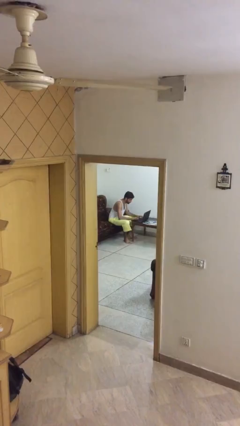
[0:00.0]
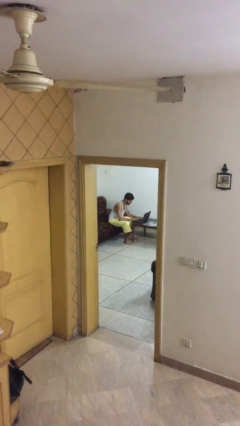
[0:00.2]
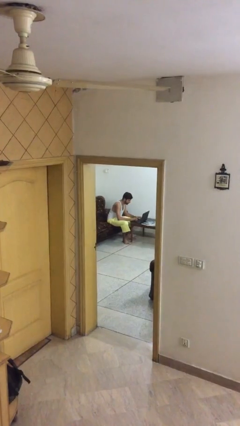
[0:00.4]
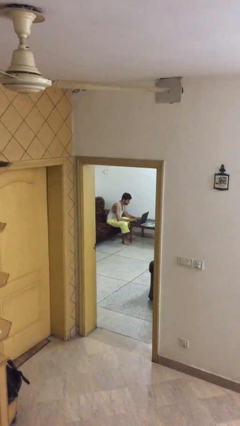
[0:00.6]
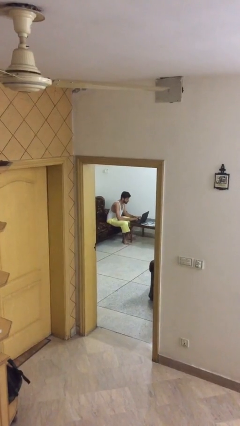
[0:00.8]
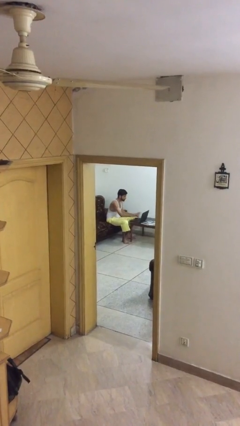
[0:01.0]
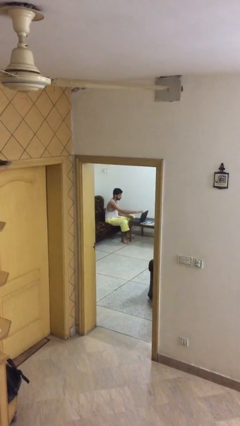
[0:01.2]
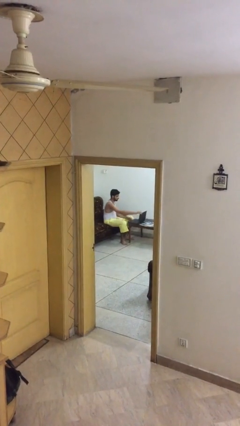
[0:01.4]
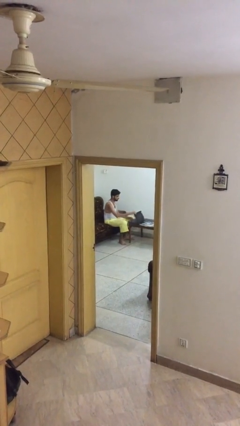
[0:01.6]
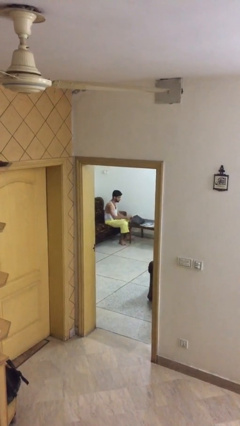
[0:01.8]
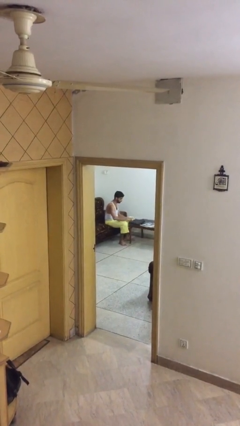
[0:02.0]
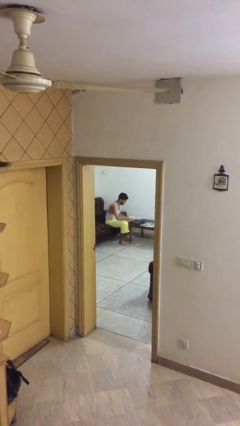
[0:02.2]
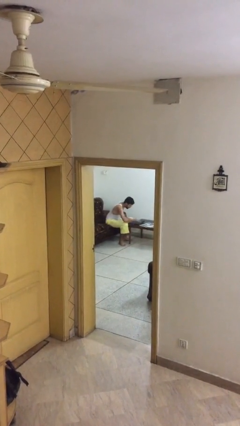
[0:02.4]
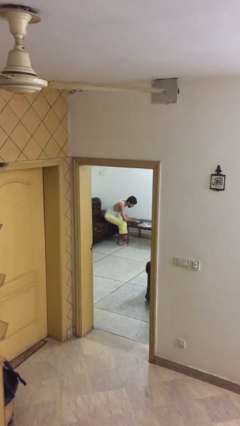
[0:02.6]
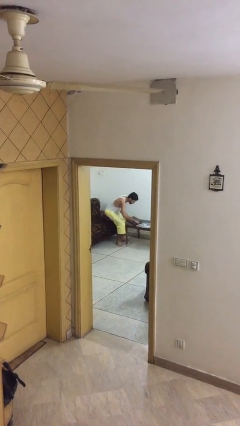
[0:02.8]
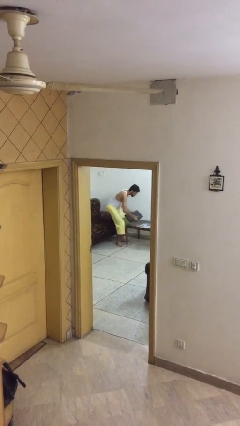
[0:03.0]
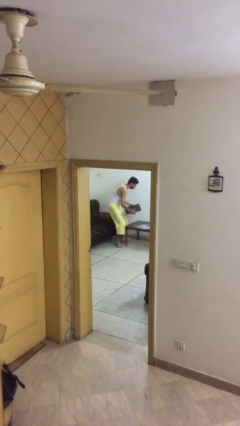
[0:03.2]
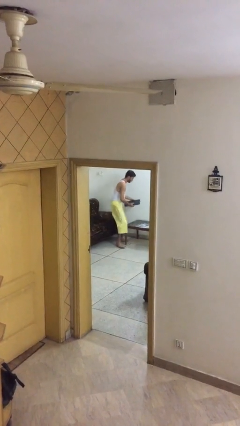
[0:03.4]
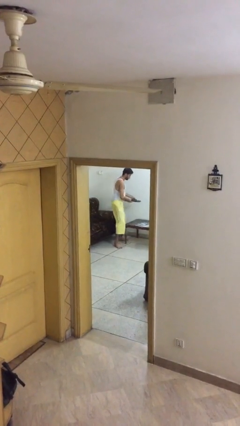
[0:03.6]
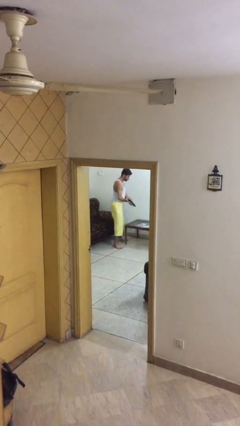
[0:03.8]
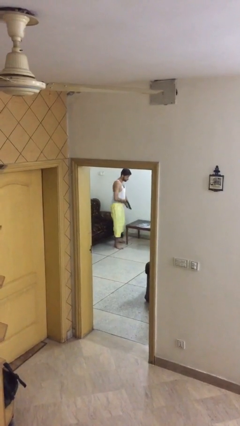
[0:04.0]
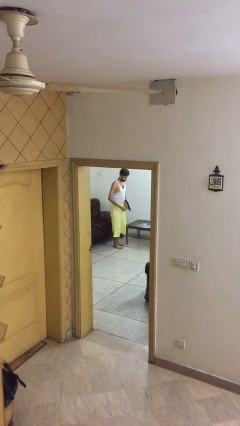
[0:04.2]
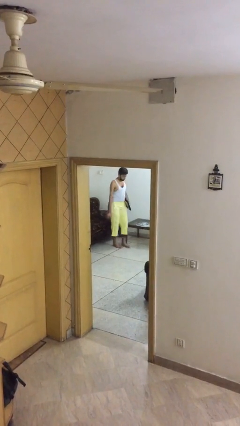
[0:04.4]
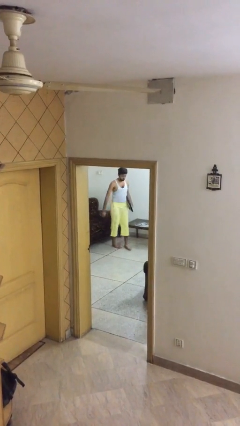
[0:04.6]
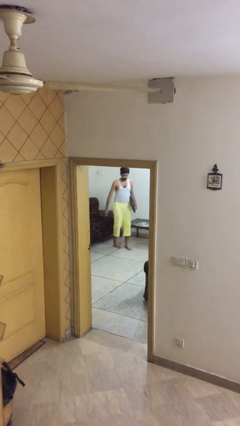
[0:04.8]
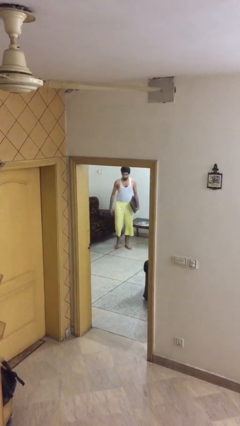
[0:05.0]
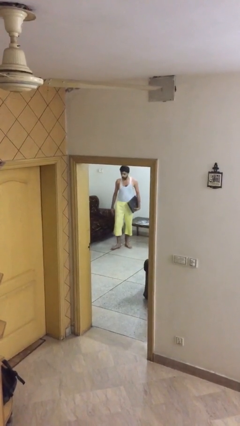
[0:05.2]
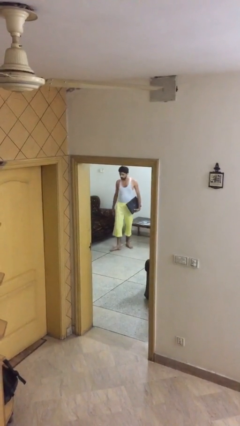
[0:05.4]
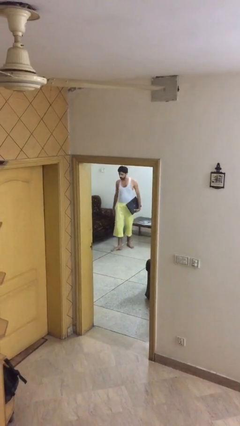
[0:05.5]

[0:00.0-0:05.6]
person stands up

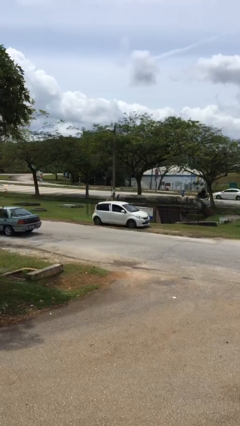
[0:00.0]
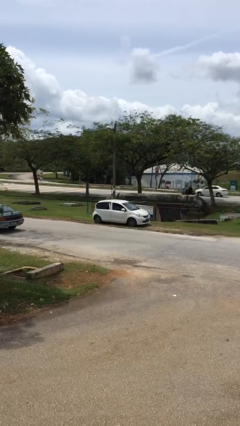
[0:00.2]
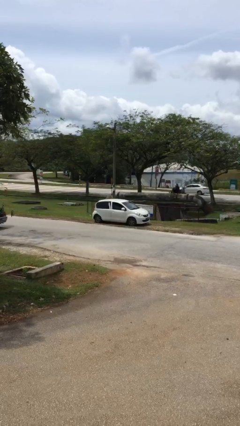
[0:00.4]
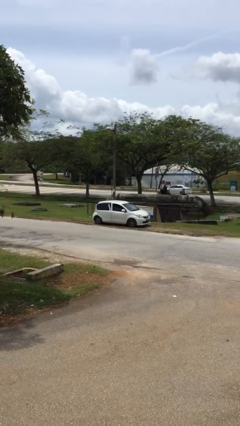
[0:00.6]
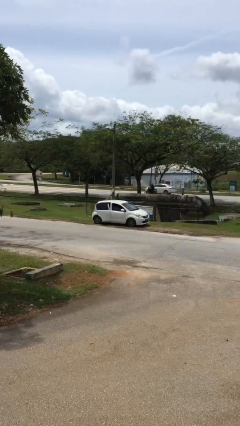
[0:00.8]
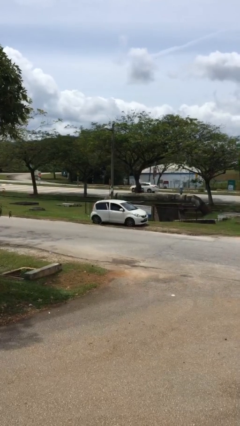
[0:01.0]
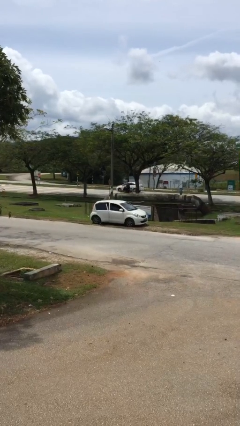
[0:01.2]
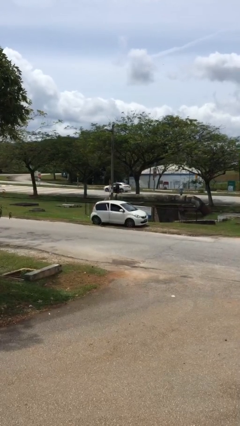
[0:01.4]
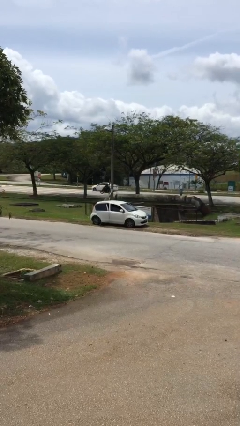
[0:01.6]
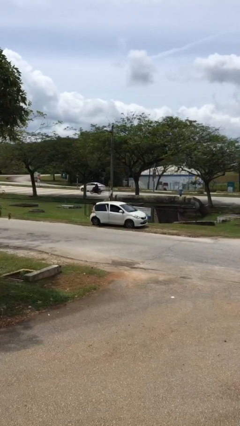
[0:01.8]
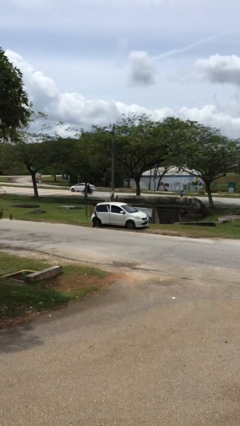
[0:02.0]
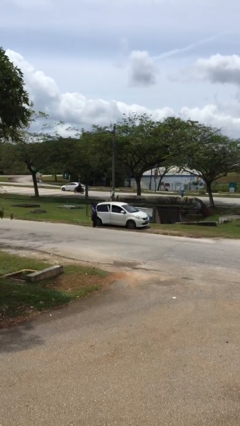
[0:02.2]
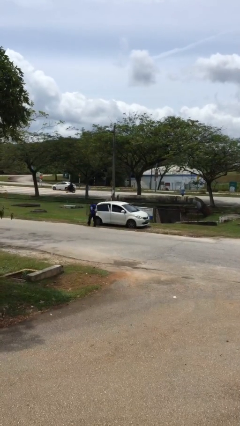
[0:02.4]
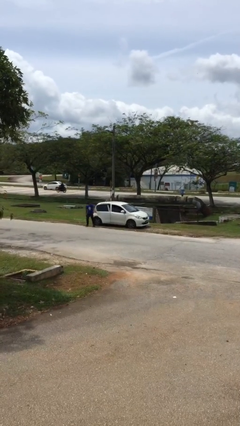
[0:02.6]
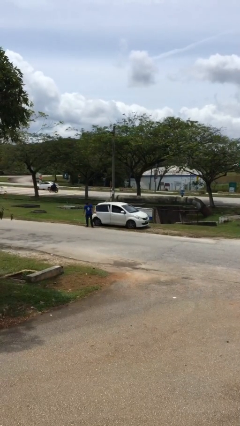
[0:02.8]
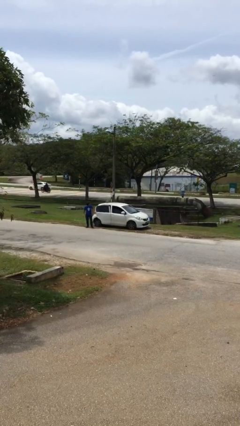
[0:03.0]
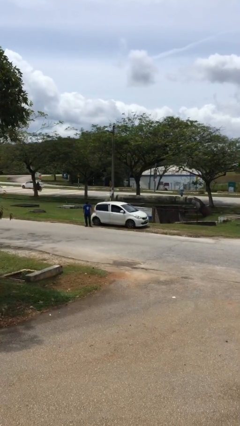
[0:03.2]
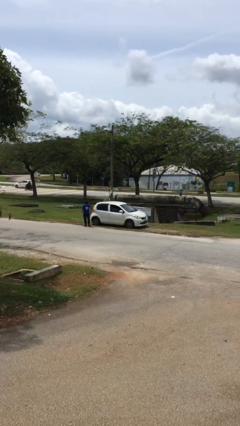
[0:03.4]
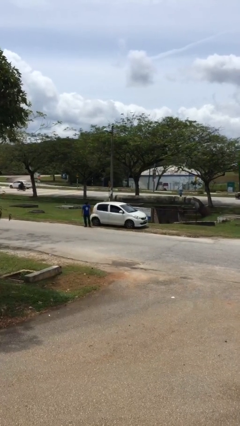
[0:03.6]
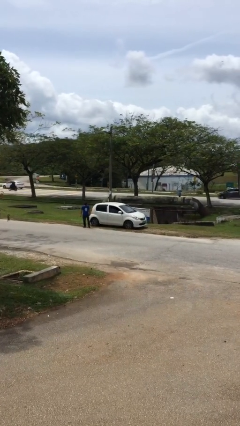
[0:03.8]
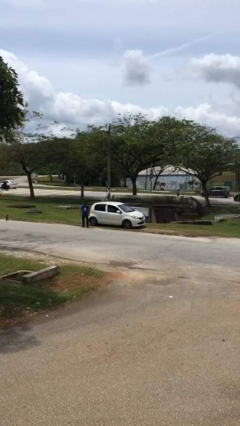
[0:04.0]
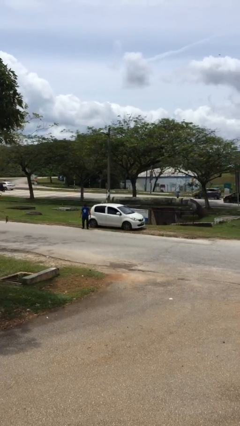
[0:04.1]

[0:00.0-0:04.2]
car drops off person

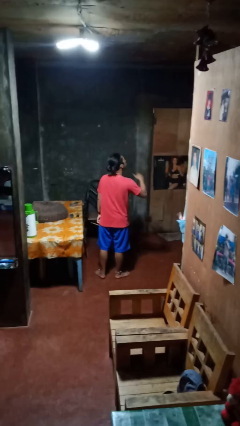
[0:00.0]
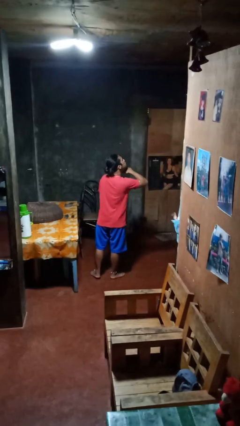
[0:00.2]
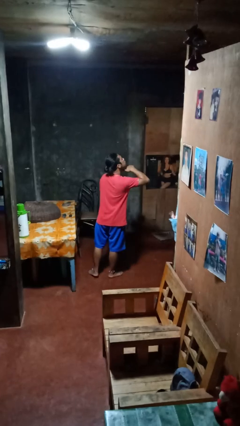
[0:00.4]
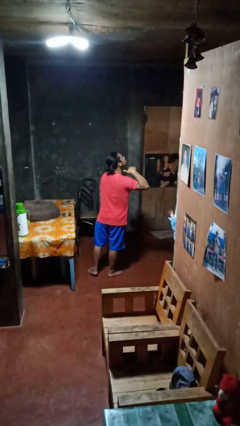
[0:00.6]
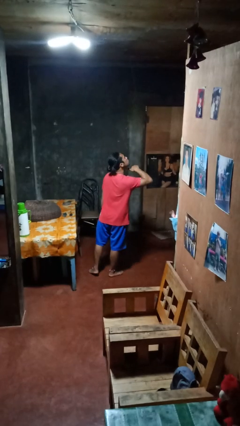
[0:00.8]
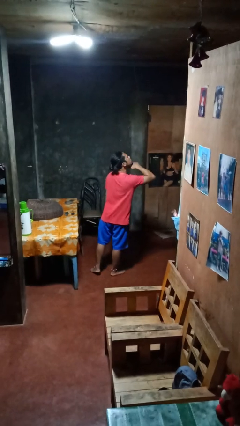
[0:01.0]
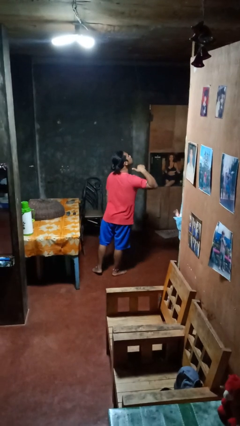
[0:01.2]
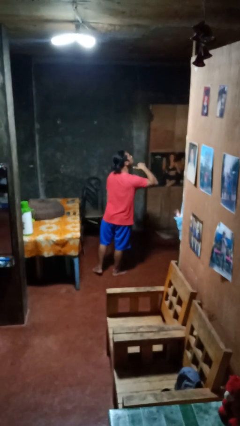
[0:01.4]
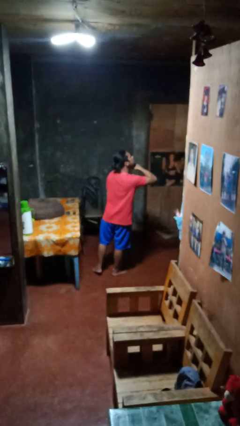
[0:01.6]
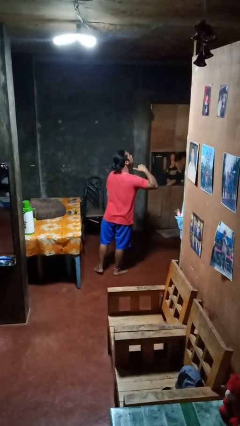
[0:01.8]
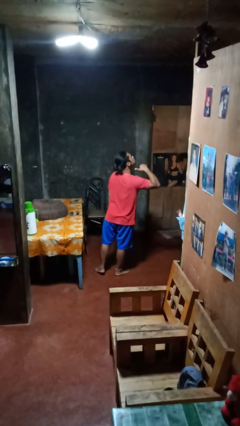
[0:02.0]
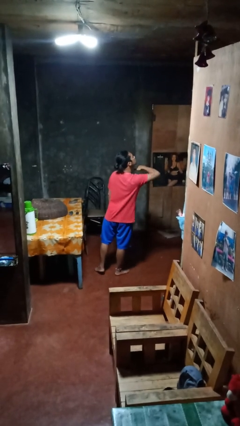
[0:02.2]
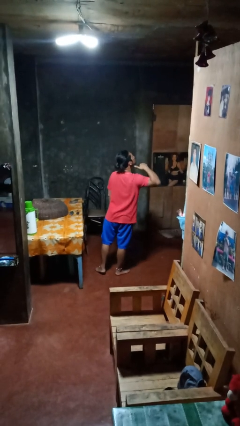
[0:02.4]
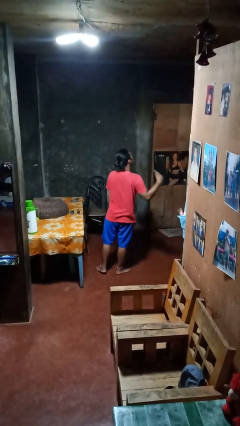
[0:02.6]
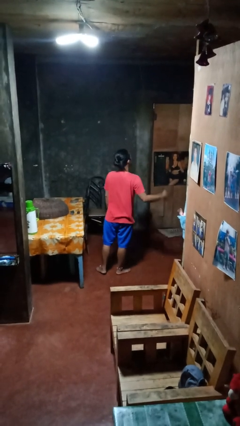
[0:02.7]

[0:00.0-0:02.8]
person gestures cut

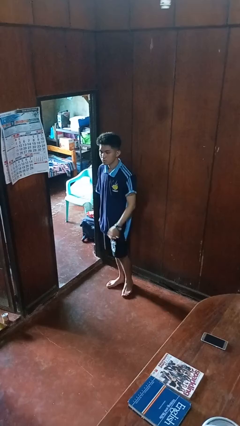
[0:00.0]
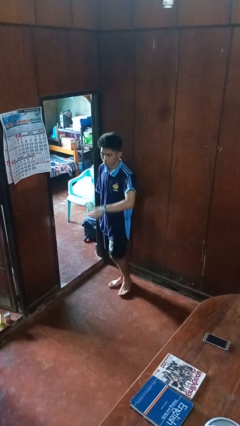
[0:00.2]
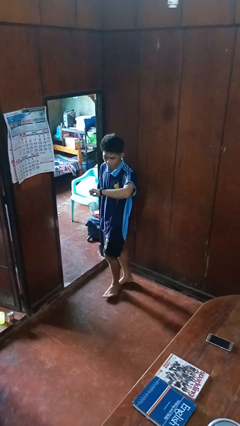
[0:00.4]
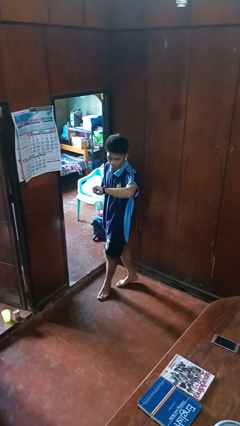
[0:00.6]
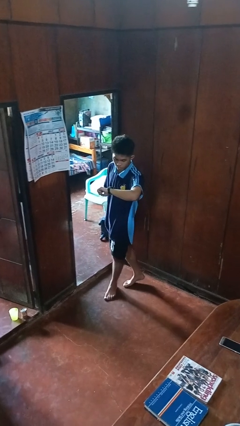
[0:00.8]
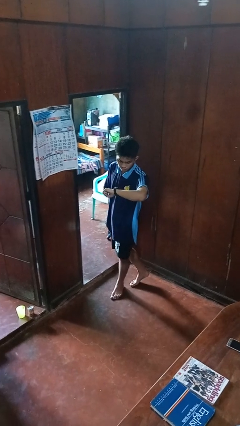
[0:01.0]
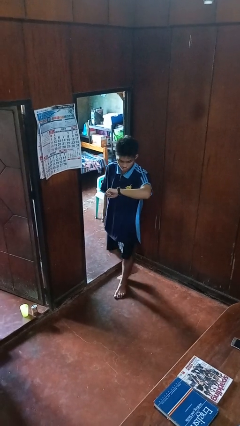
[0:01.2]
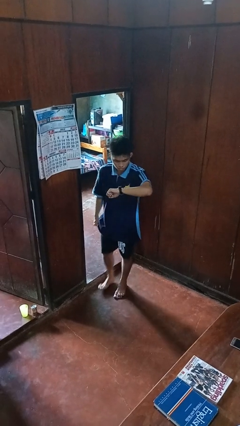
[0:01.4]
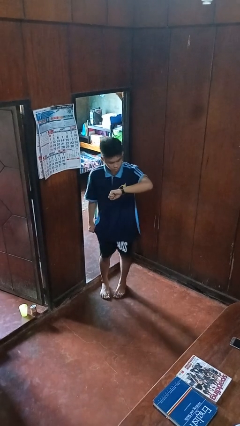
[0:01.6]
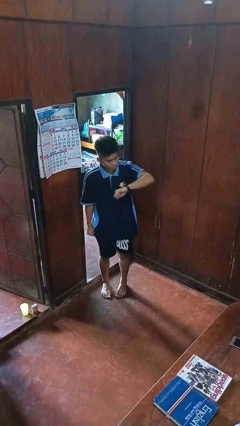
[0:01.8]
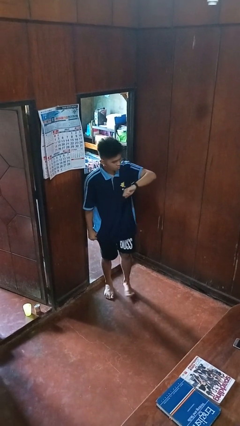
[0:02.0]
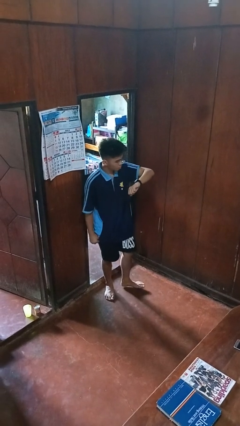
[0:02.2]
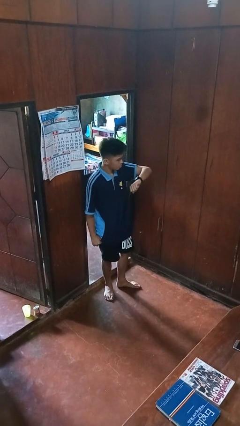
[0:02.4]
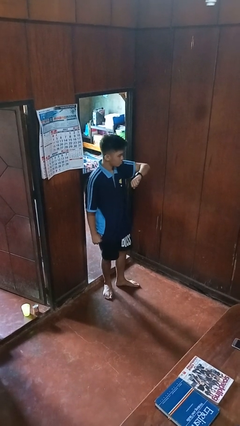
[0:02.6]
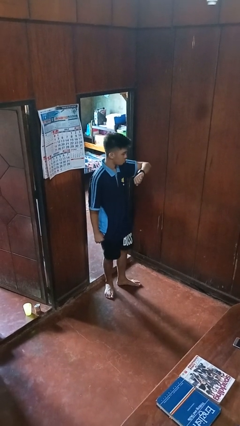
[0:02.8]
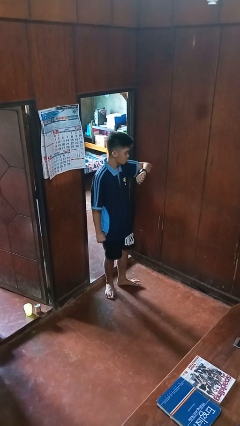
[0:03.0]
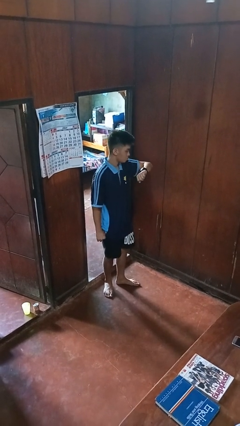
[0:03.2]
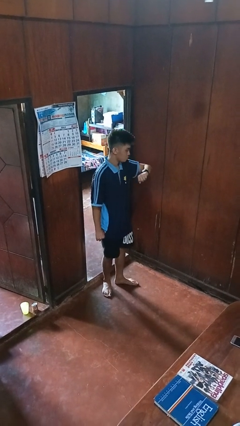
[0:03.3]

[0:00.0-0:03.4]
person looks at wristwatch

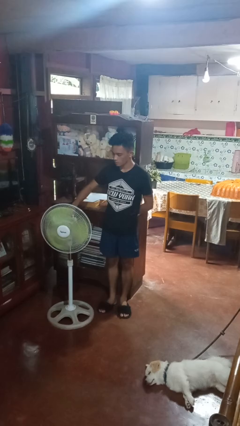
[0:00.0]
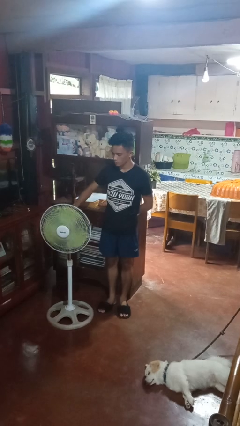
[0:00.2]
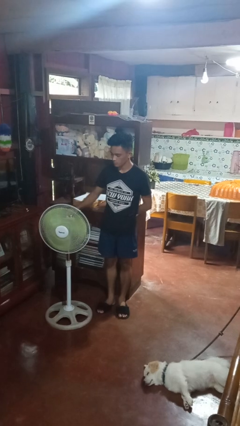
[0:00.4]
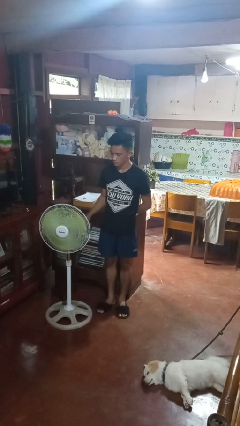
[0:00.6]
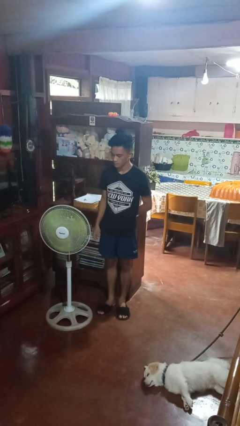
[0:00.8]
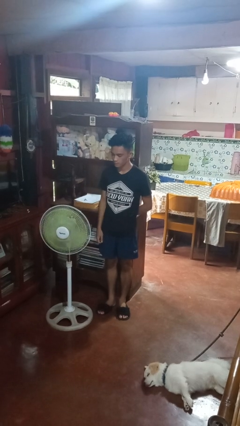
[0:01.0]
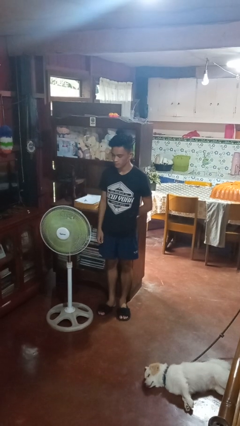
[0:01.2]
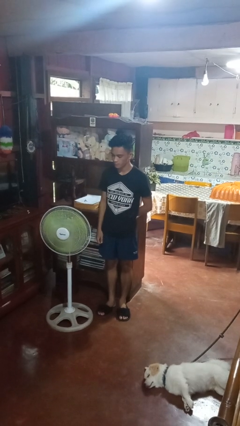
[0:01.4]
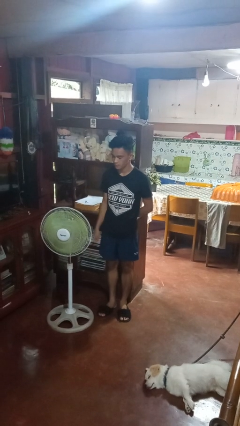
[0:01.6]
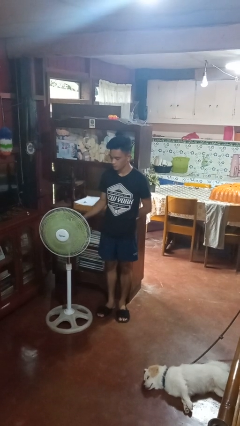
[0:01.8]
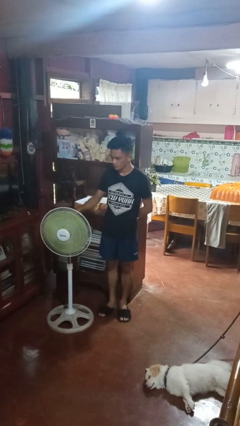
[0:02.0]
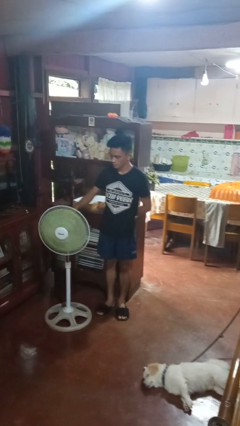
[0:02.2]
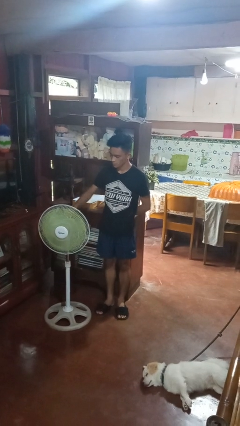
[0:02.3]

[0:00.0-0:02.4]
person turns on fan
